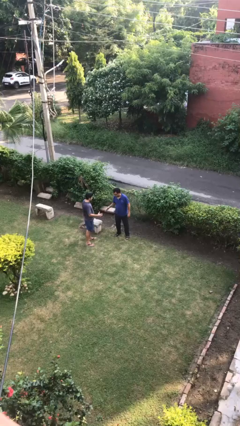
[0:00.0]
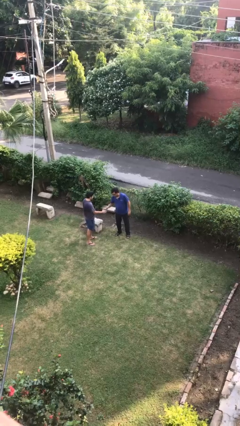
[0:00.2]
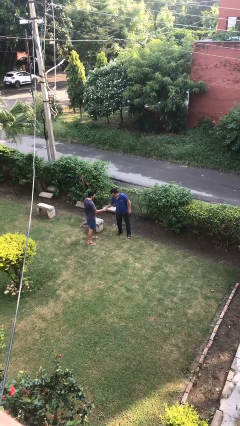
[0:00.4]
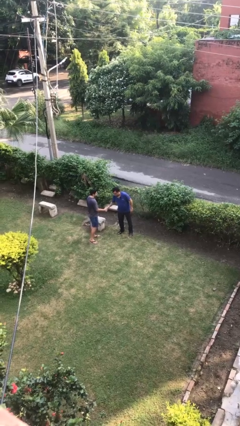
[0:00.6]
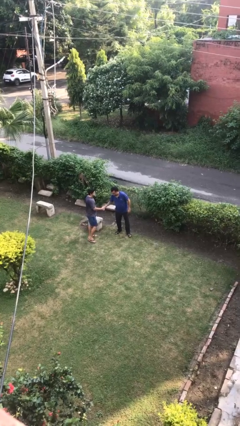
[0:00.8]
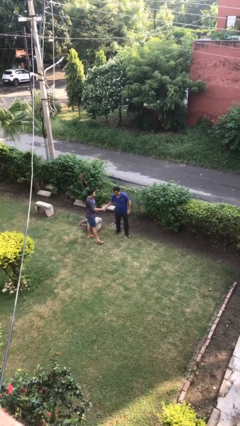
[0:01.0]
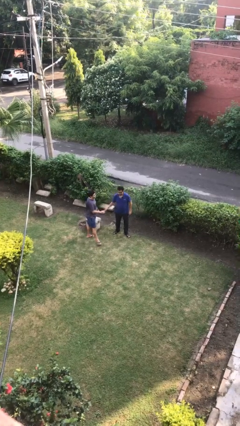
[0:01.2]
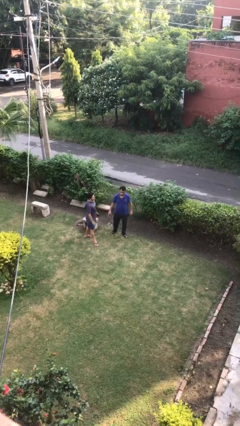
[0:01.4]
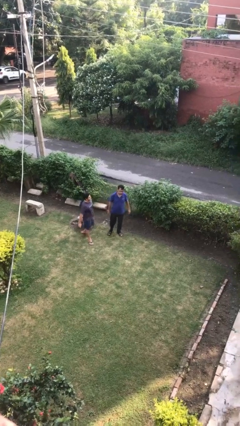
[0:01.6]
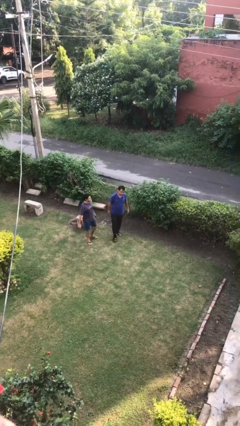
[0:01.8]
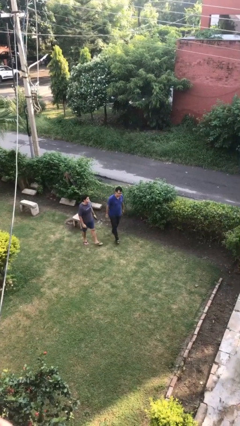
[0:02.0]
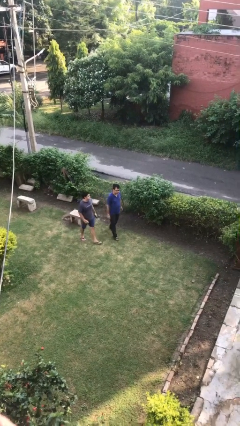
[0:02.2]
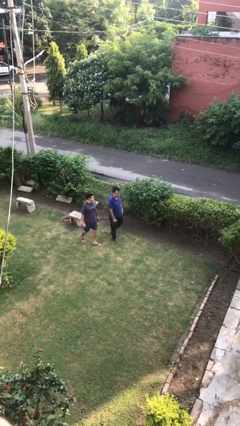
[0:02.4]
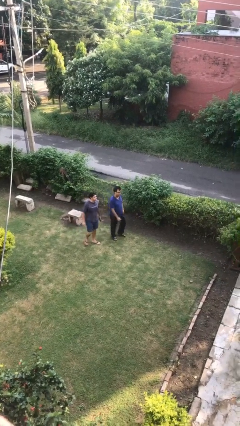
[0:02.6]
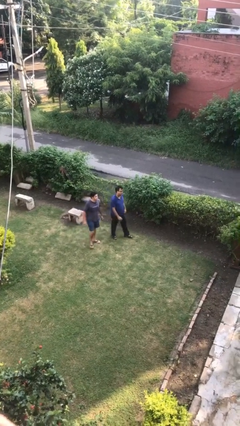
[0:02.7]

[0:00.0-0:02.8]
person shakes hand

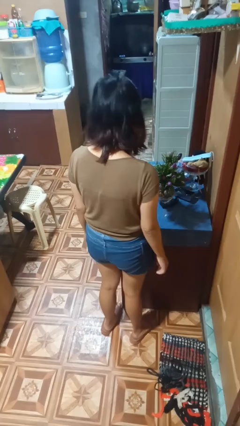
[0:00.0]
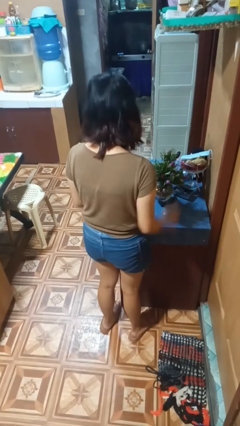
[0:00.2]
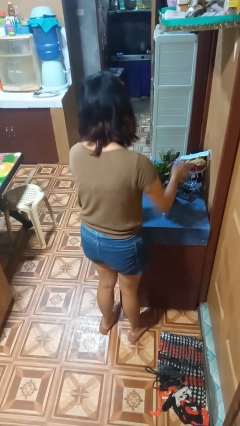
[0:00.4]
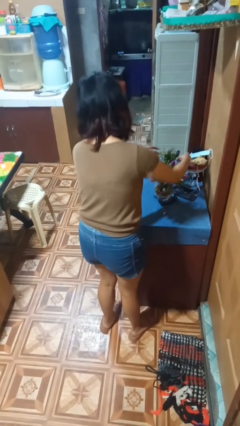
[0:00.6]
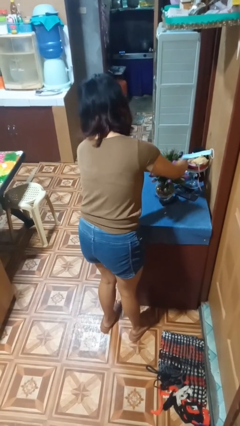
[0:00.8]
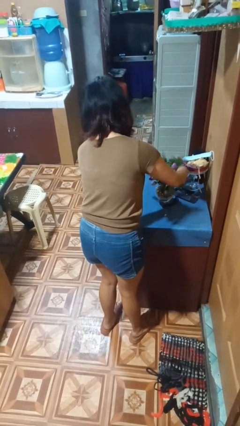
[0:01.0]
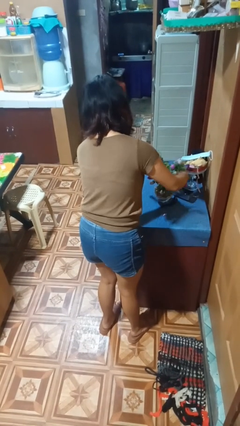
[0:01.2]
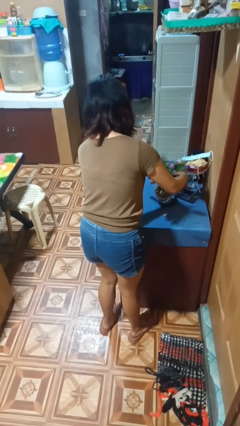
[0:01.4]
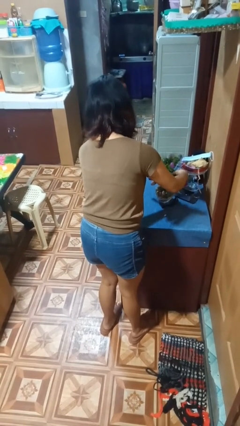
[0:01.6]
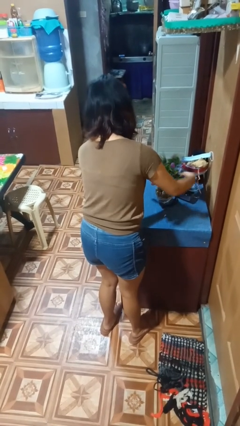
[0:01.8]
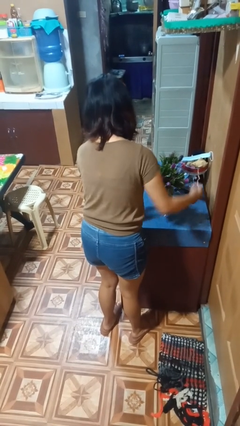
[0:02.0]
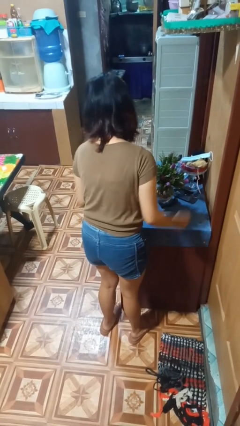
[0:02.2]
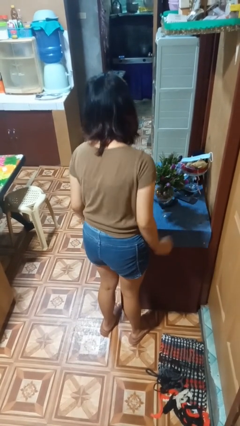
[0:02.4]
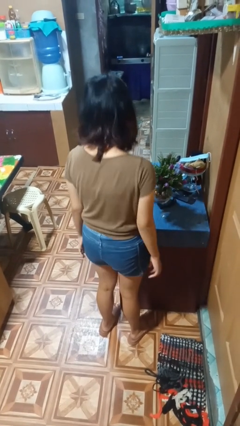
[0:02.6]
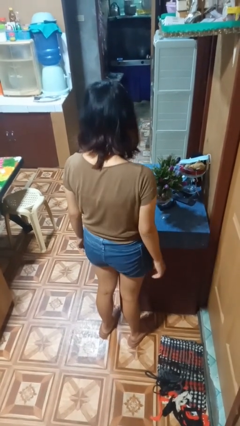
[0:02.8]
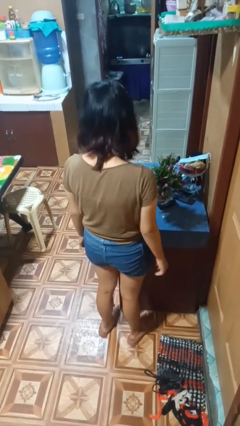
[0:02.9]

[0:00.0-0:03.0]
person arranges flowers in vase

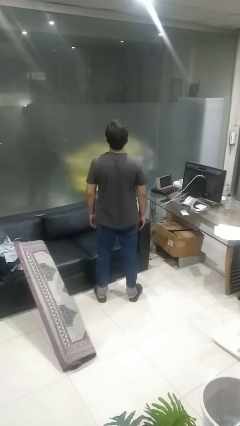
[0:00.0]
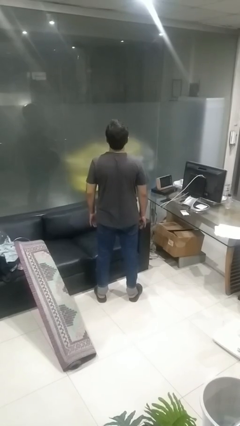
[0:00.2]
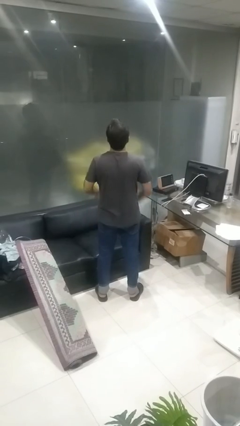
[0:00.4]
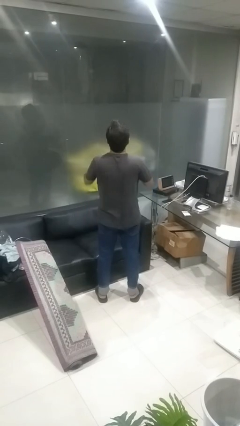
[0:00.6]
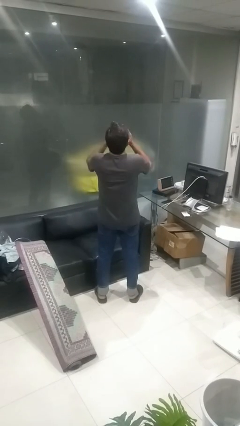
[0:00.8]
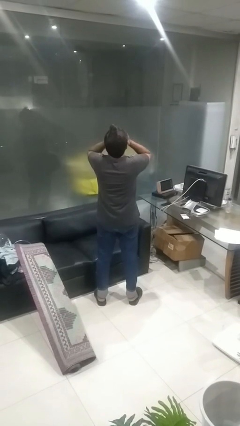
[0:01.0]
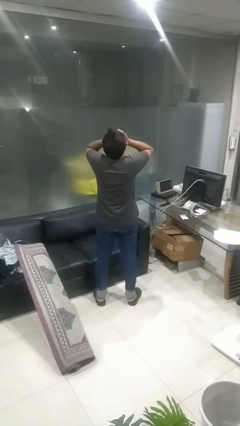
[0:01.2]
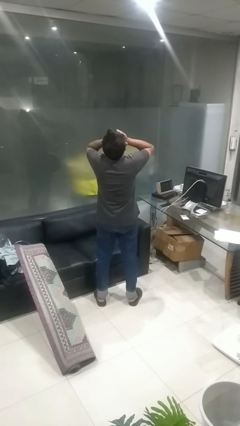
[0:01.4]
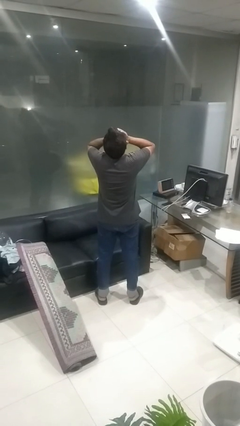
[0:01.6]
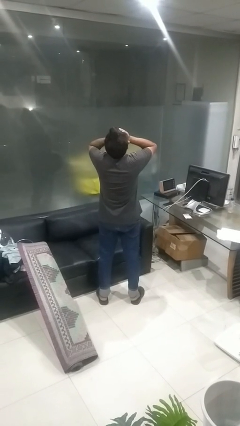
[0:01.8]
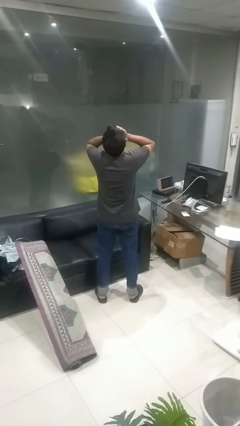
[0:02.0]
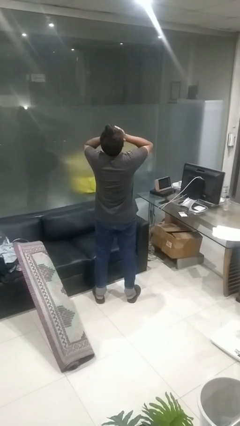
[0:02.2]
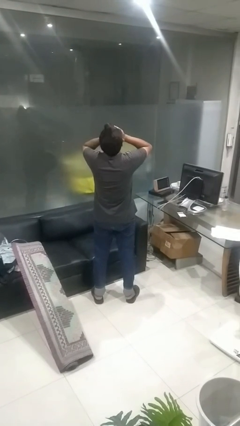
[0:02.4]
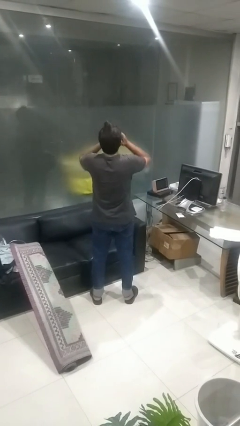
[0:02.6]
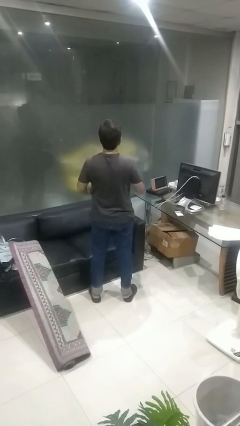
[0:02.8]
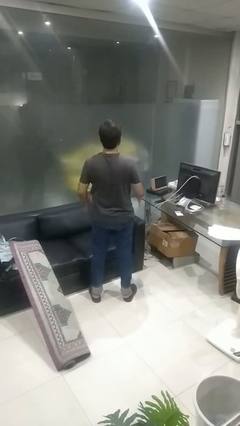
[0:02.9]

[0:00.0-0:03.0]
person covers face with hands

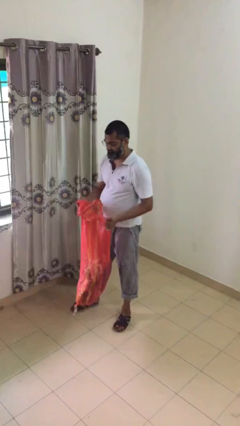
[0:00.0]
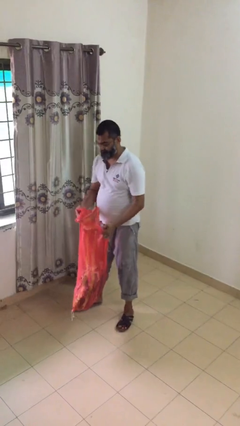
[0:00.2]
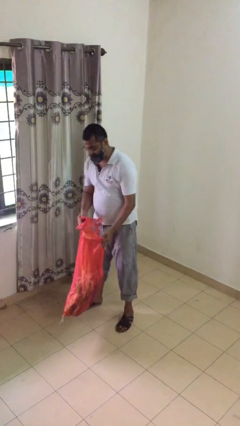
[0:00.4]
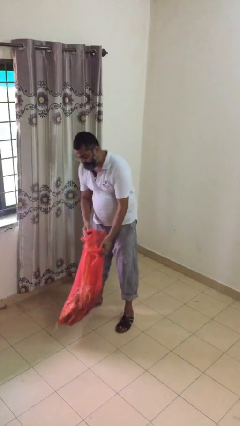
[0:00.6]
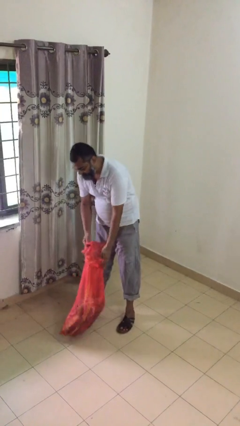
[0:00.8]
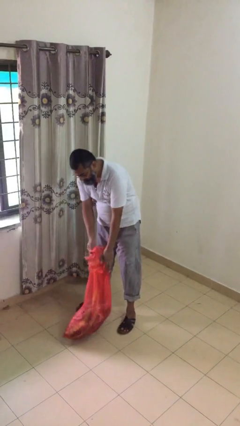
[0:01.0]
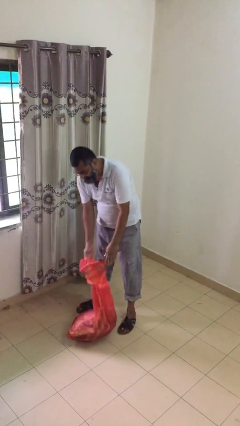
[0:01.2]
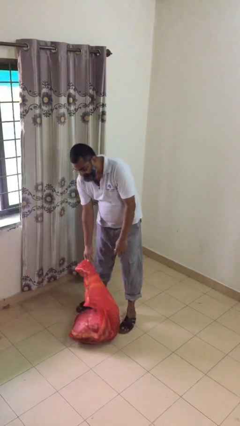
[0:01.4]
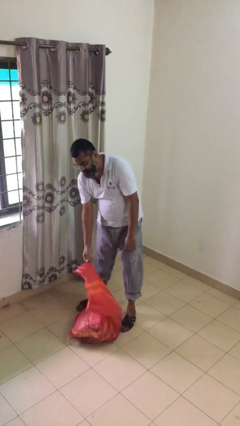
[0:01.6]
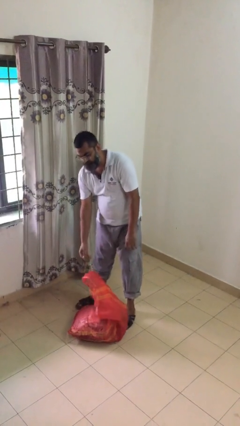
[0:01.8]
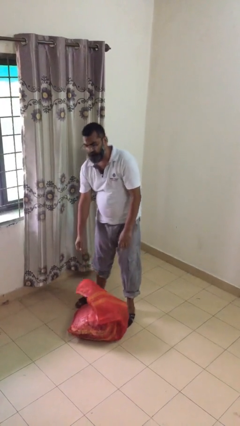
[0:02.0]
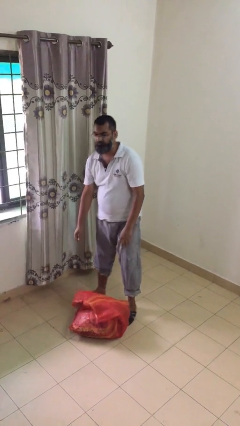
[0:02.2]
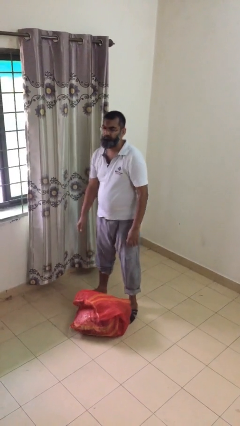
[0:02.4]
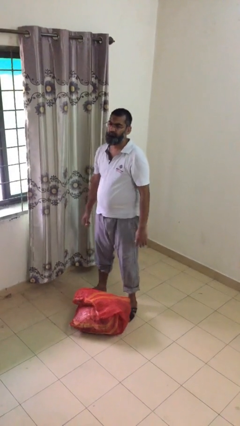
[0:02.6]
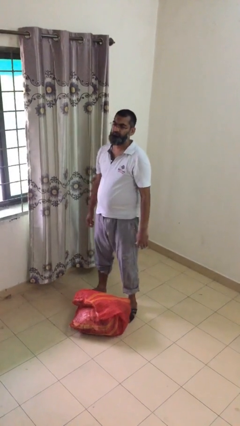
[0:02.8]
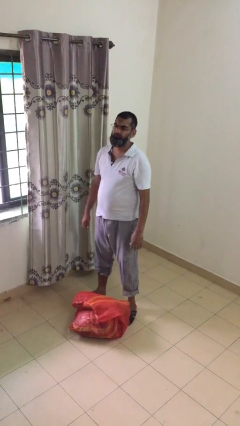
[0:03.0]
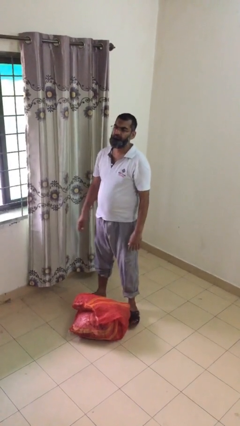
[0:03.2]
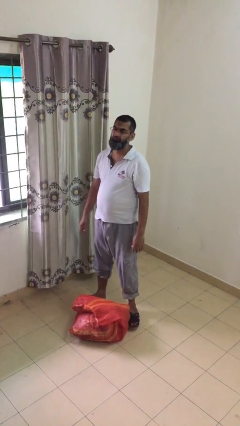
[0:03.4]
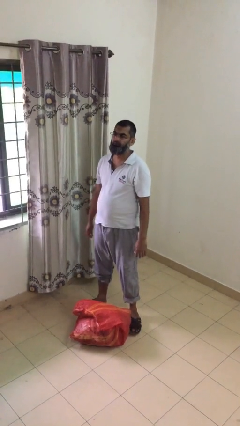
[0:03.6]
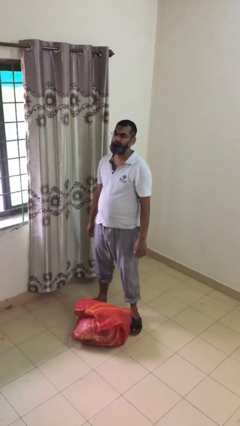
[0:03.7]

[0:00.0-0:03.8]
person puts down object on floor

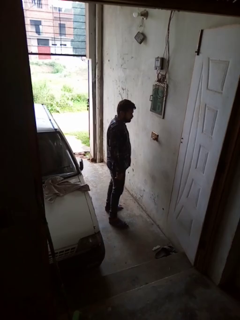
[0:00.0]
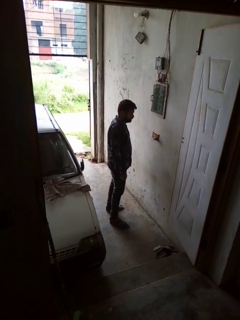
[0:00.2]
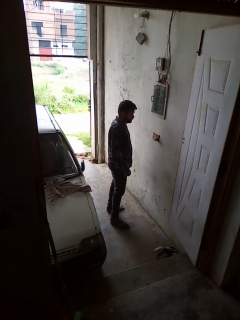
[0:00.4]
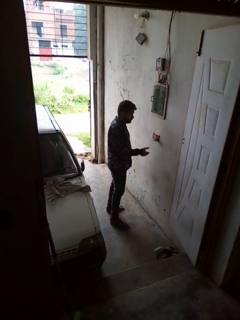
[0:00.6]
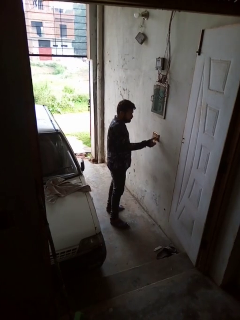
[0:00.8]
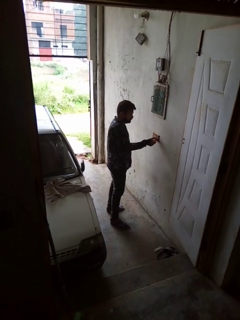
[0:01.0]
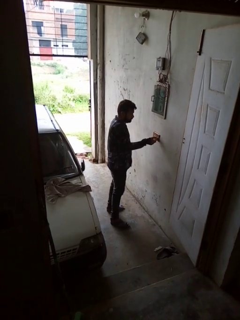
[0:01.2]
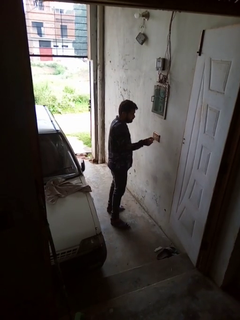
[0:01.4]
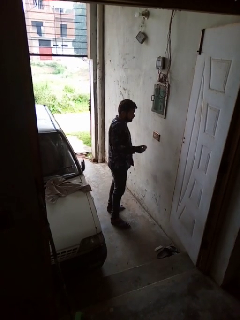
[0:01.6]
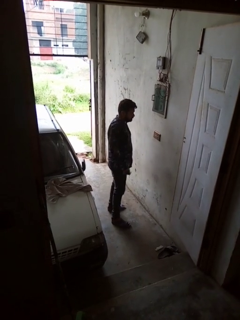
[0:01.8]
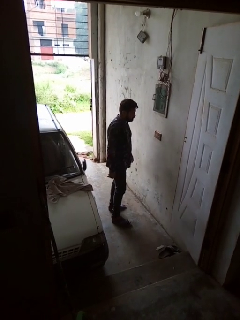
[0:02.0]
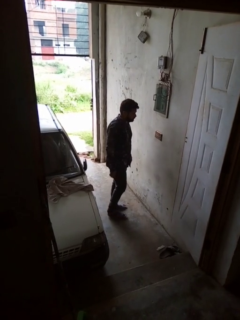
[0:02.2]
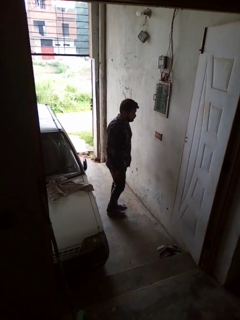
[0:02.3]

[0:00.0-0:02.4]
person unplugs from electrical socket

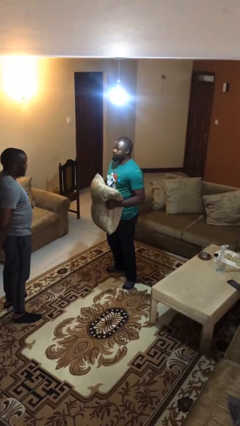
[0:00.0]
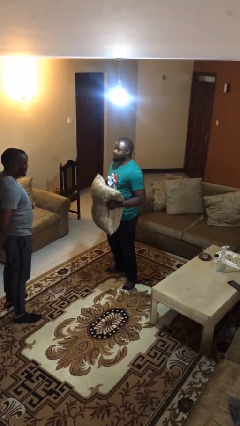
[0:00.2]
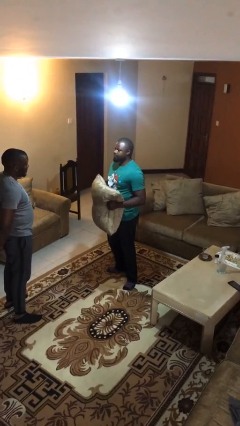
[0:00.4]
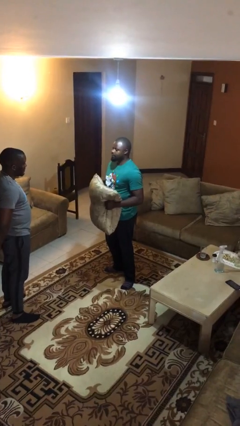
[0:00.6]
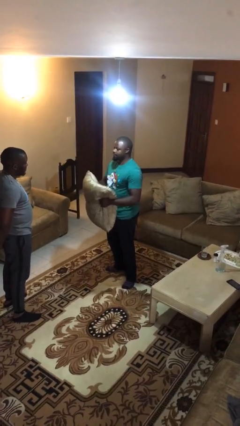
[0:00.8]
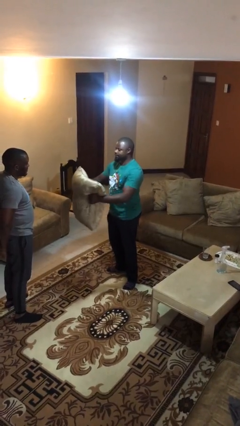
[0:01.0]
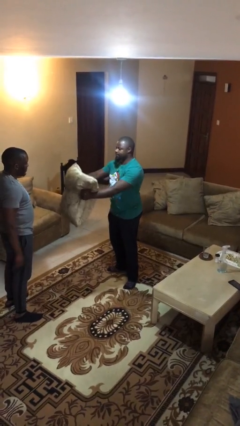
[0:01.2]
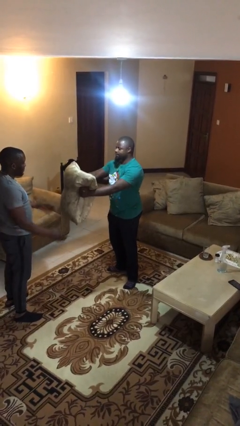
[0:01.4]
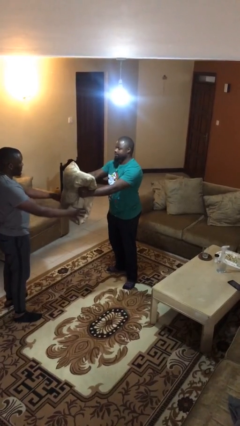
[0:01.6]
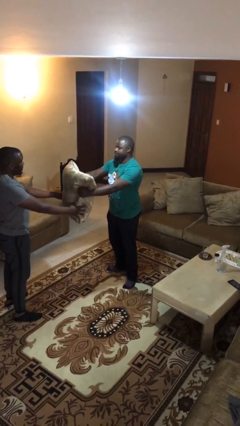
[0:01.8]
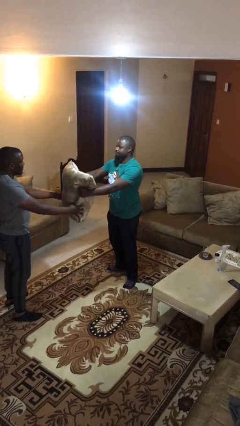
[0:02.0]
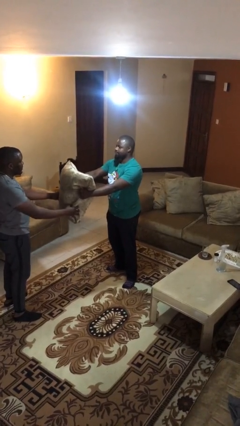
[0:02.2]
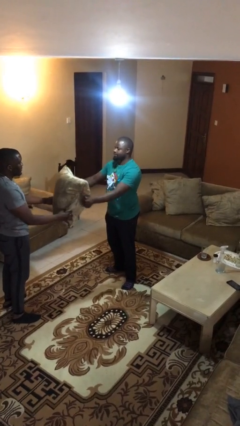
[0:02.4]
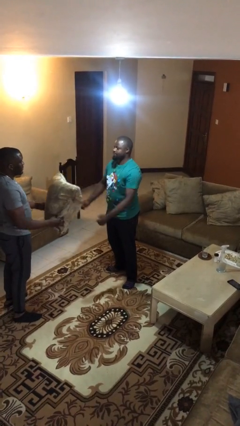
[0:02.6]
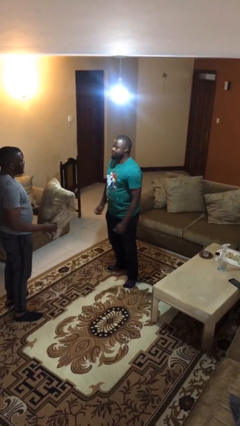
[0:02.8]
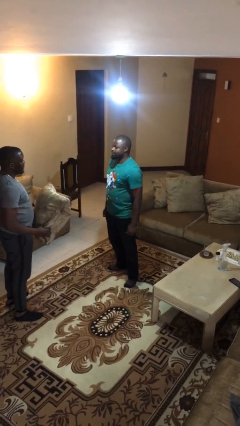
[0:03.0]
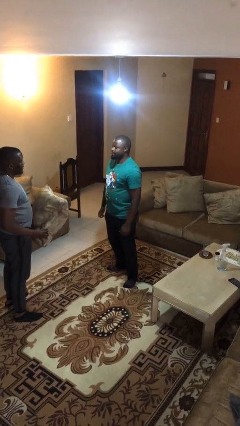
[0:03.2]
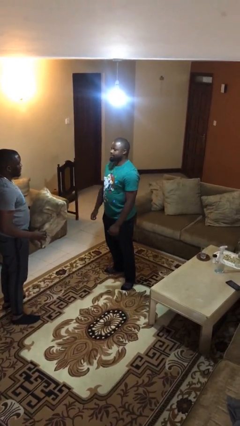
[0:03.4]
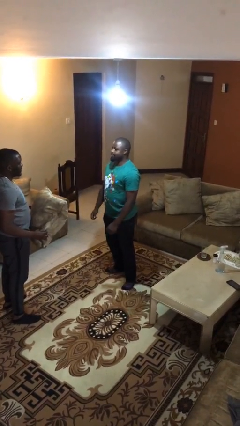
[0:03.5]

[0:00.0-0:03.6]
person transfers object to person
